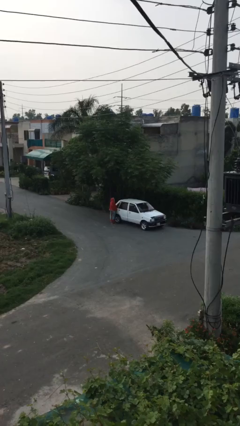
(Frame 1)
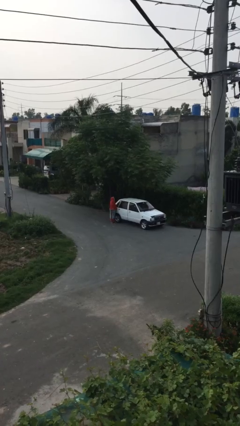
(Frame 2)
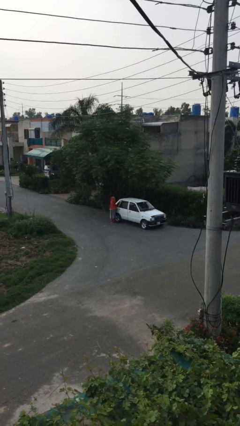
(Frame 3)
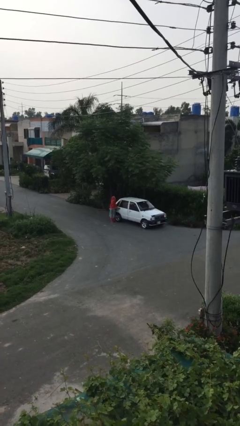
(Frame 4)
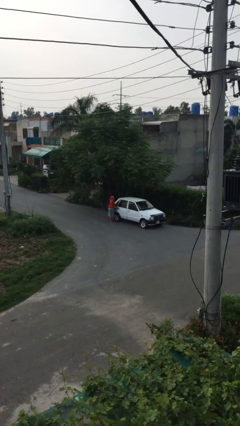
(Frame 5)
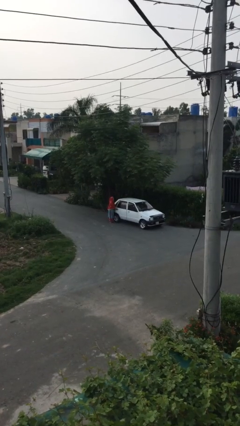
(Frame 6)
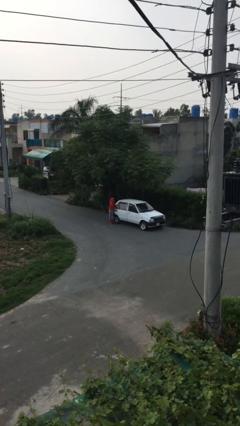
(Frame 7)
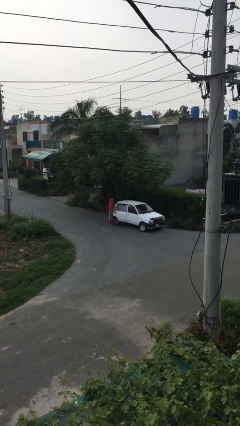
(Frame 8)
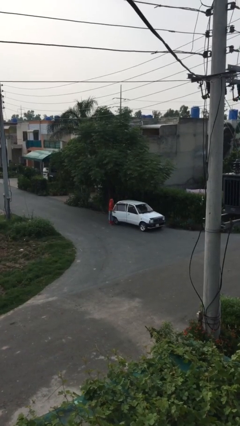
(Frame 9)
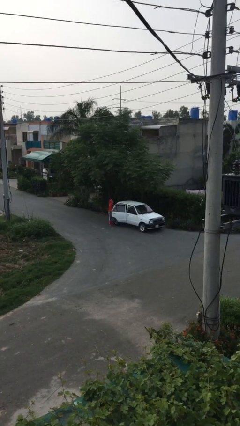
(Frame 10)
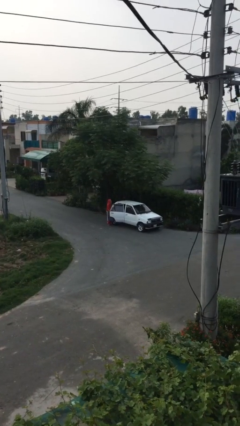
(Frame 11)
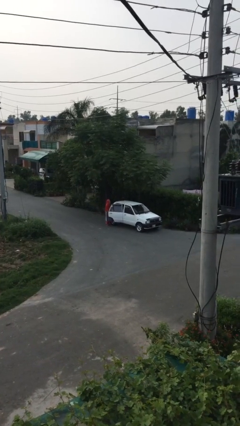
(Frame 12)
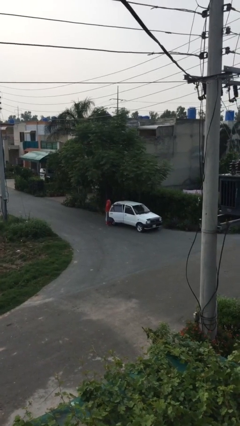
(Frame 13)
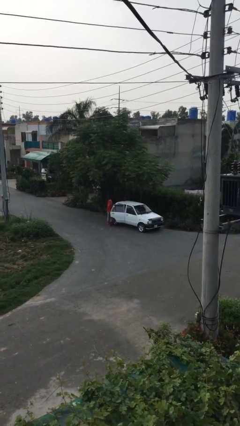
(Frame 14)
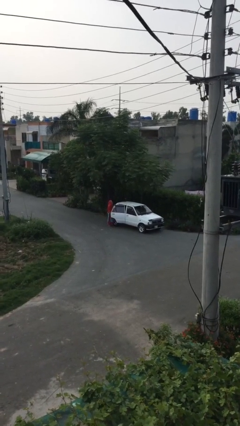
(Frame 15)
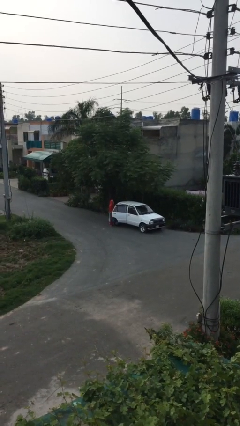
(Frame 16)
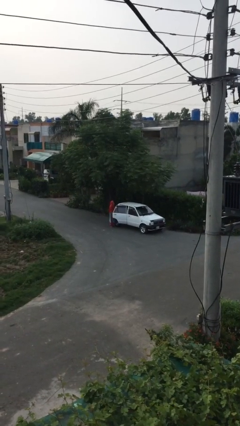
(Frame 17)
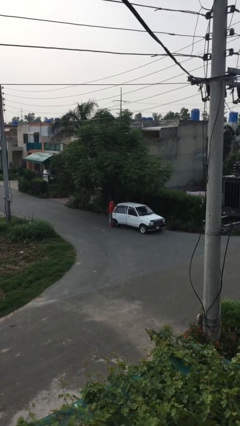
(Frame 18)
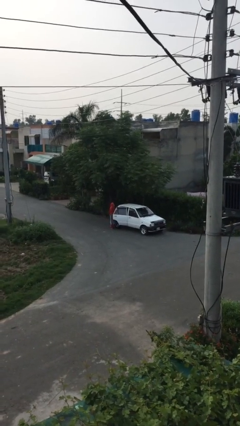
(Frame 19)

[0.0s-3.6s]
person opens car door

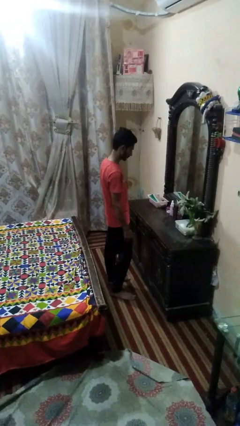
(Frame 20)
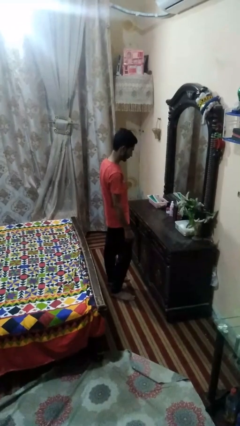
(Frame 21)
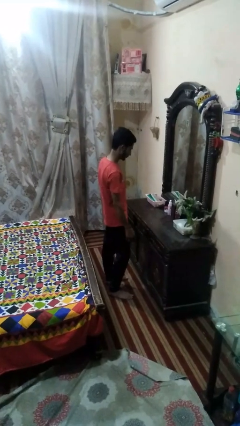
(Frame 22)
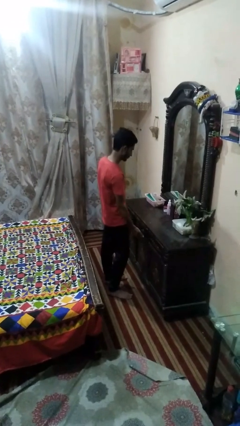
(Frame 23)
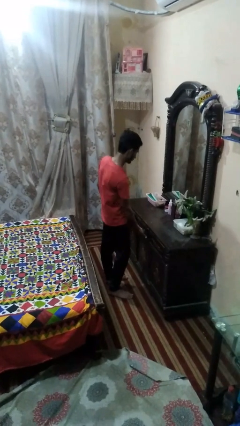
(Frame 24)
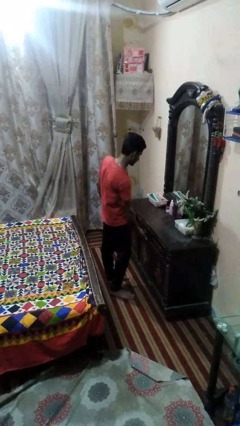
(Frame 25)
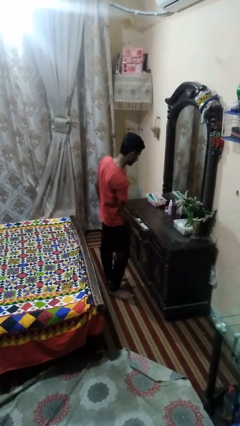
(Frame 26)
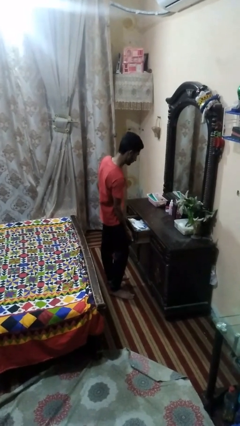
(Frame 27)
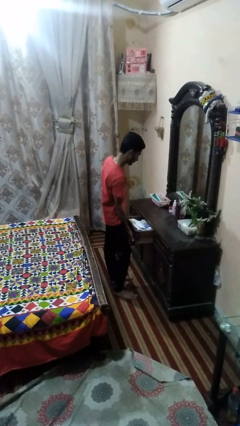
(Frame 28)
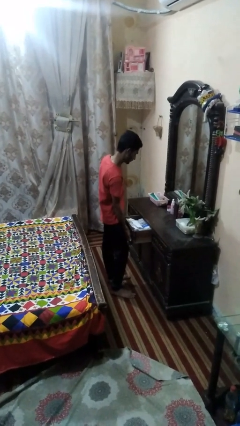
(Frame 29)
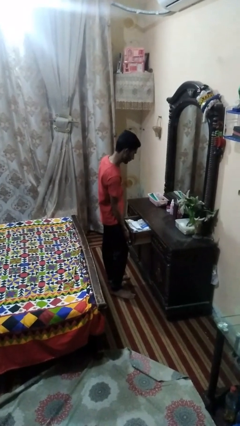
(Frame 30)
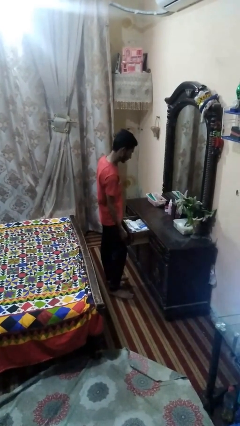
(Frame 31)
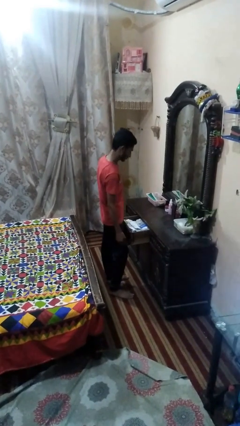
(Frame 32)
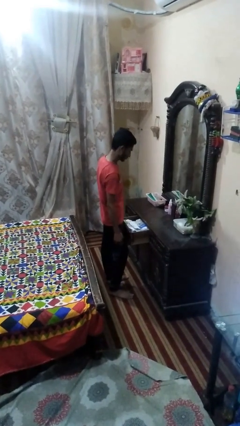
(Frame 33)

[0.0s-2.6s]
person opens dresser drawer

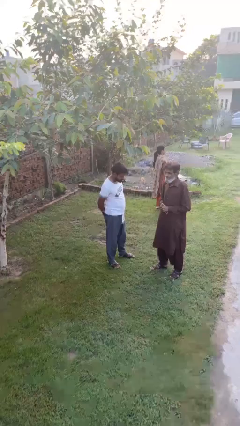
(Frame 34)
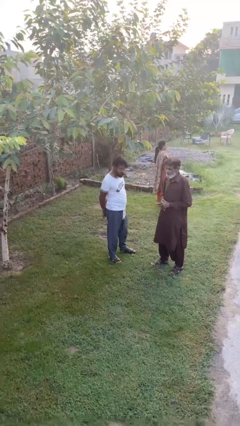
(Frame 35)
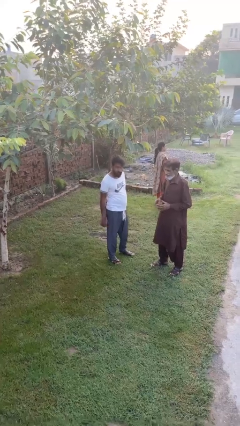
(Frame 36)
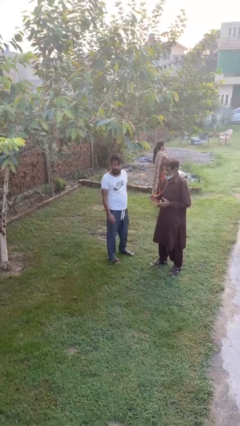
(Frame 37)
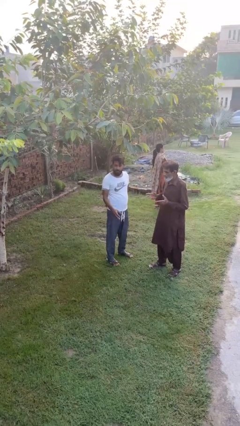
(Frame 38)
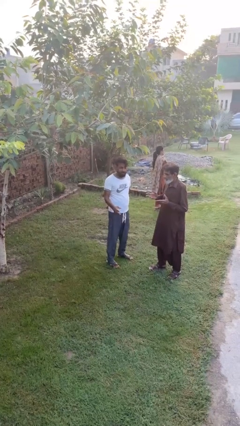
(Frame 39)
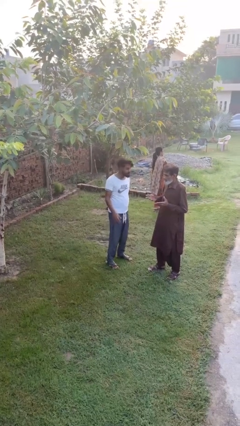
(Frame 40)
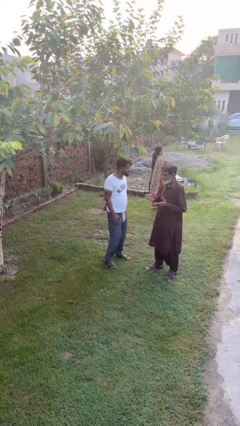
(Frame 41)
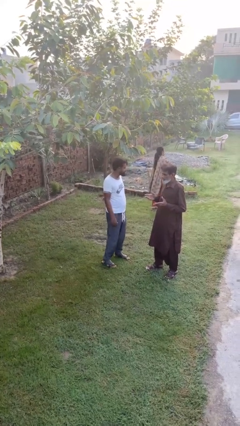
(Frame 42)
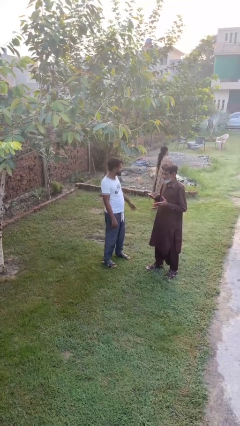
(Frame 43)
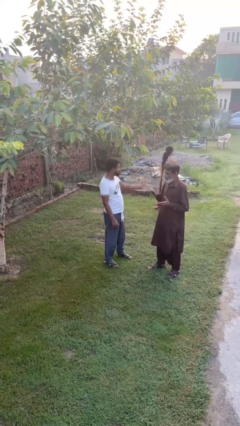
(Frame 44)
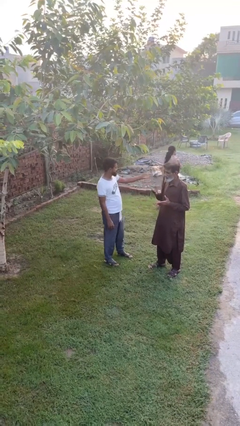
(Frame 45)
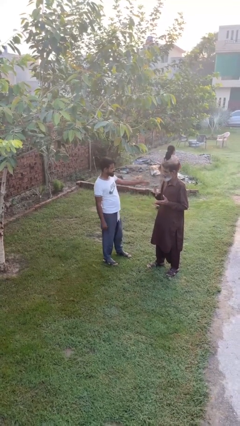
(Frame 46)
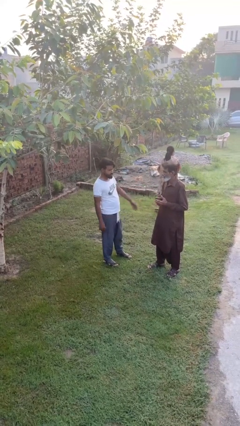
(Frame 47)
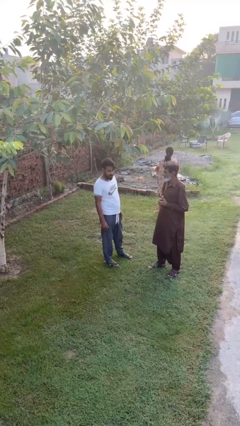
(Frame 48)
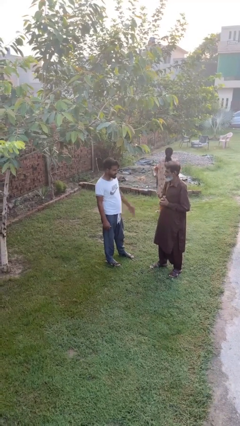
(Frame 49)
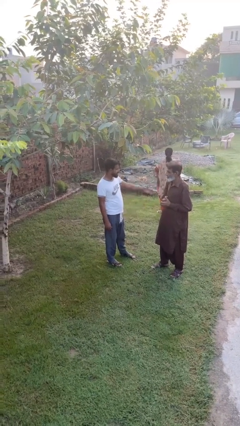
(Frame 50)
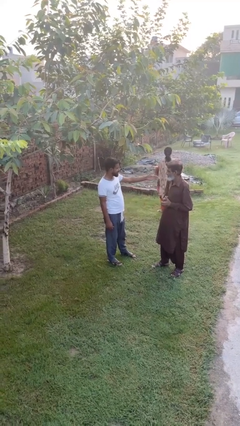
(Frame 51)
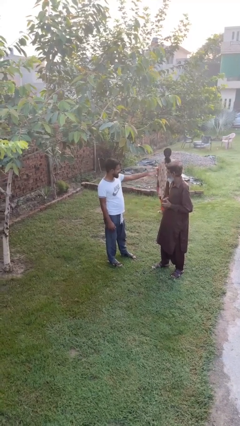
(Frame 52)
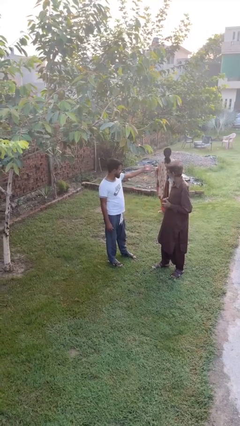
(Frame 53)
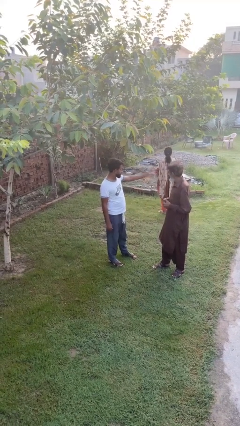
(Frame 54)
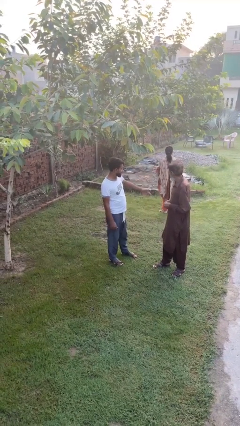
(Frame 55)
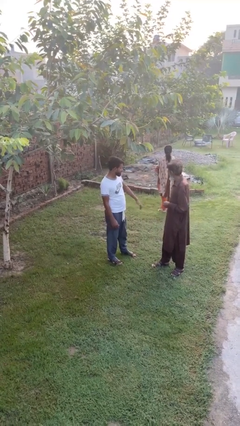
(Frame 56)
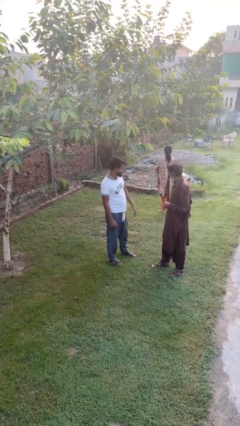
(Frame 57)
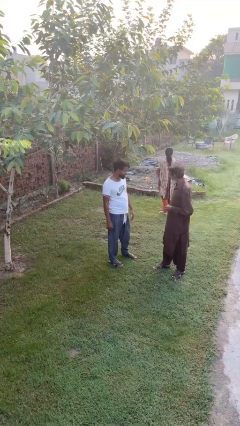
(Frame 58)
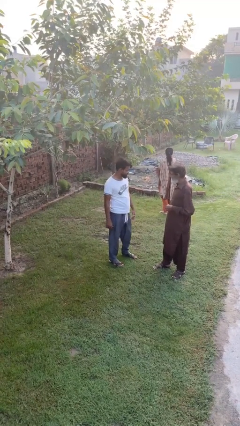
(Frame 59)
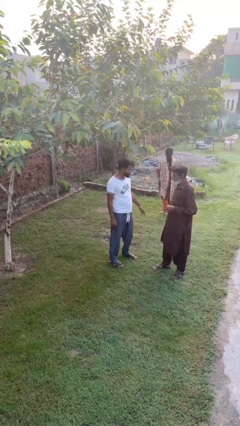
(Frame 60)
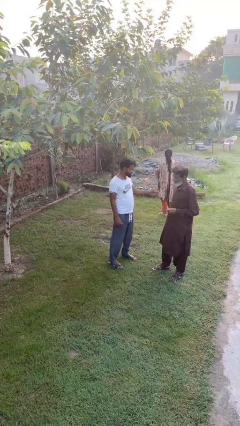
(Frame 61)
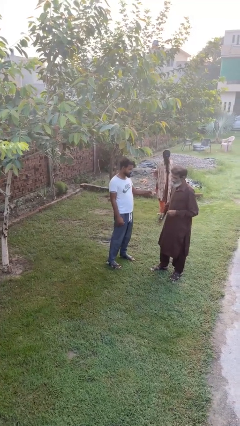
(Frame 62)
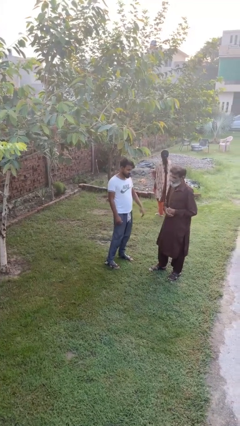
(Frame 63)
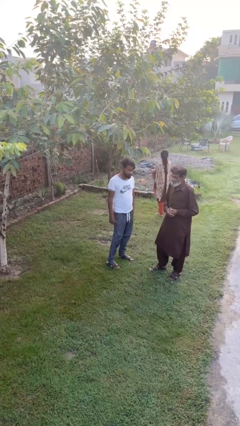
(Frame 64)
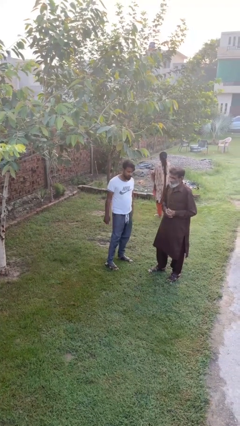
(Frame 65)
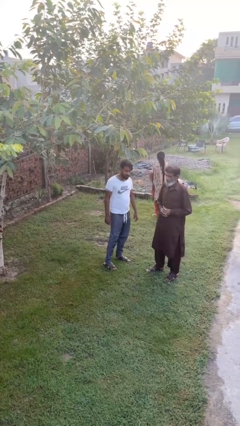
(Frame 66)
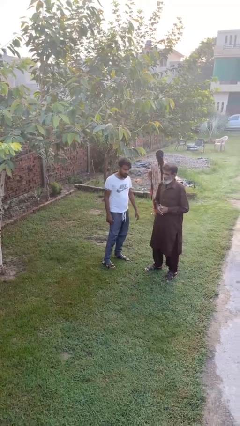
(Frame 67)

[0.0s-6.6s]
person talks to person

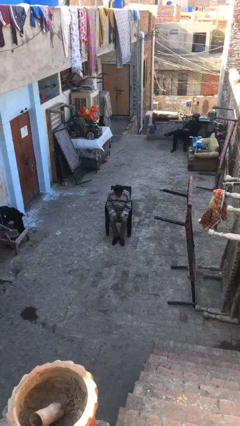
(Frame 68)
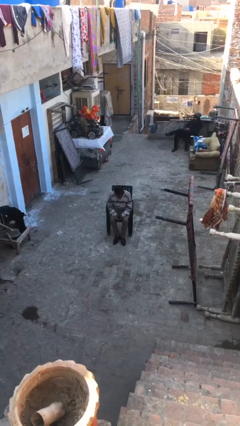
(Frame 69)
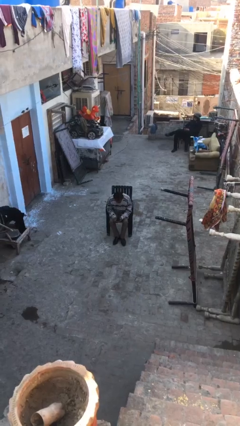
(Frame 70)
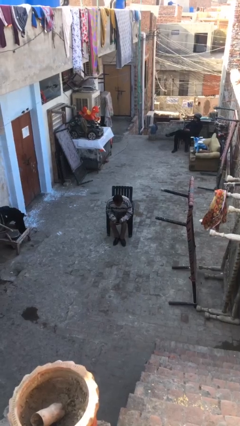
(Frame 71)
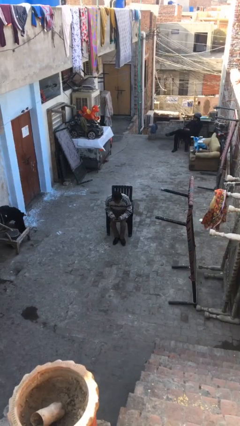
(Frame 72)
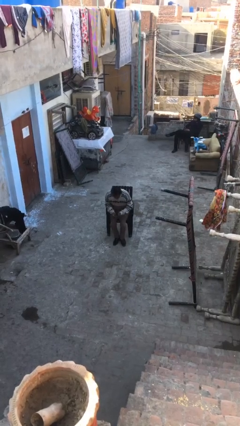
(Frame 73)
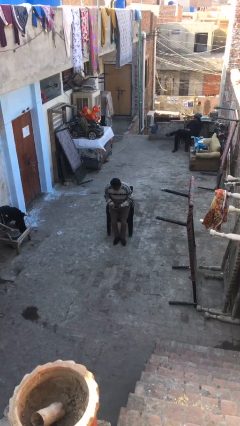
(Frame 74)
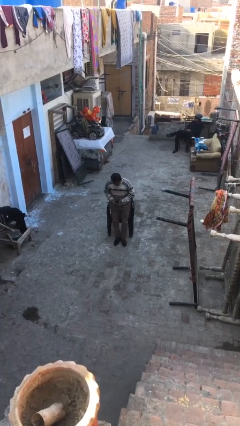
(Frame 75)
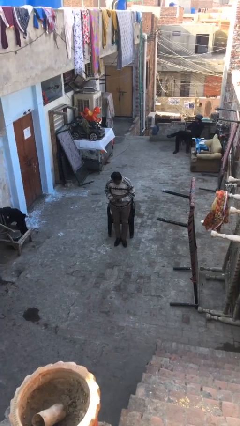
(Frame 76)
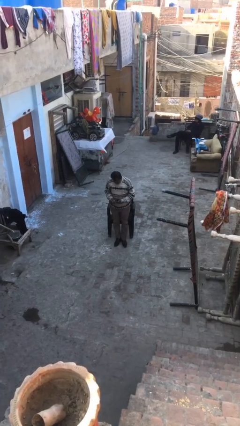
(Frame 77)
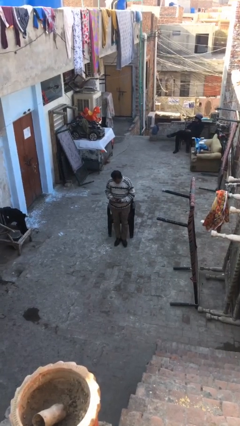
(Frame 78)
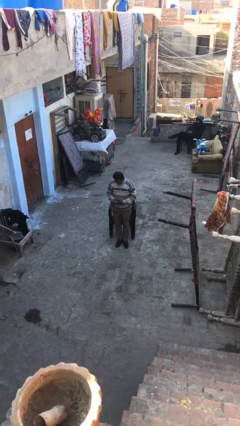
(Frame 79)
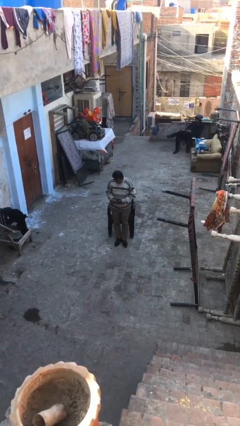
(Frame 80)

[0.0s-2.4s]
person stands up

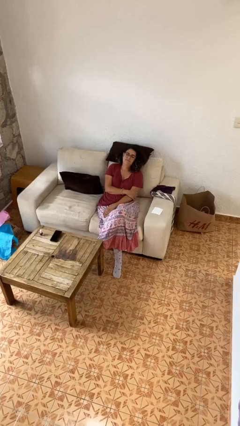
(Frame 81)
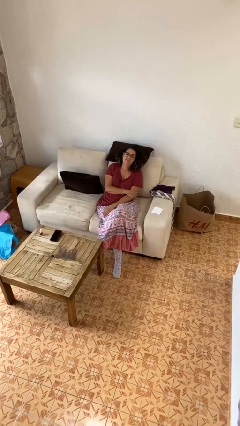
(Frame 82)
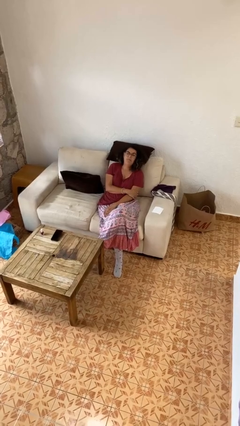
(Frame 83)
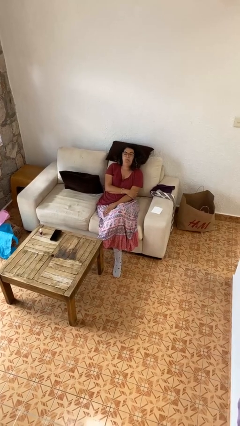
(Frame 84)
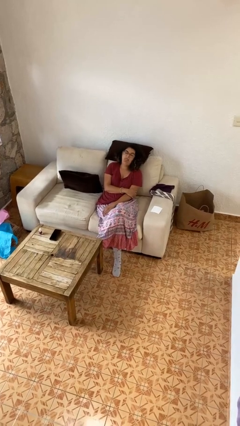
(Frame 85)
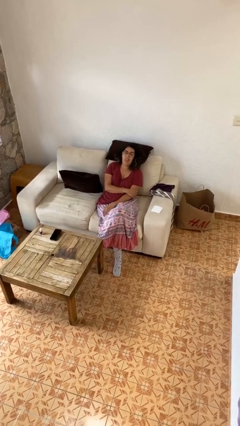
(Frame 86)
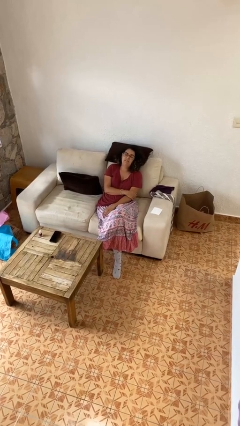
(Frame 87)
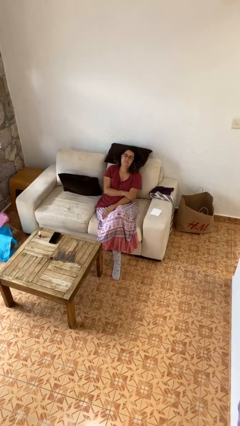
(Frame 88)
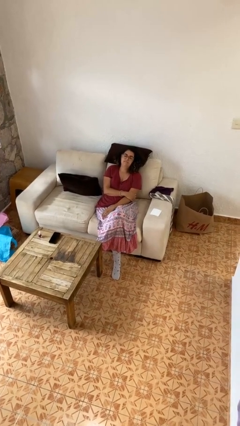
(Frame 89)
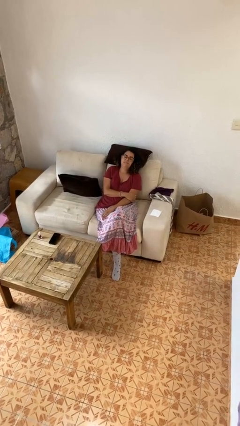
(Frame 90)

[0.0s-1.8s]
person sticks out tongue
